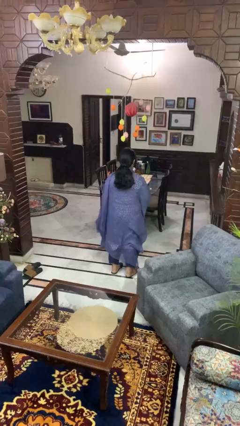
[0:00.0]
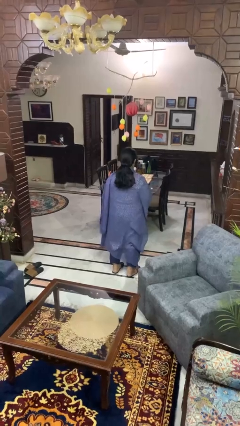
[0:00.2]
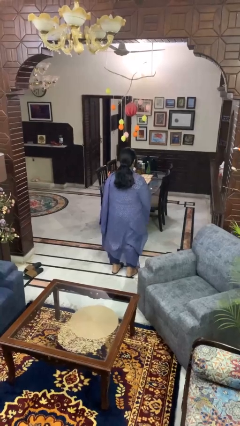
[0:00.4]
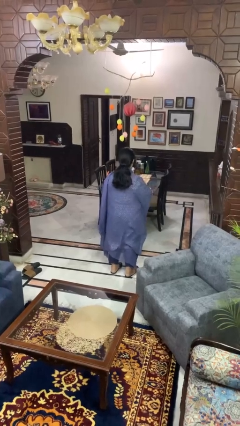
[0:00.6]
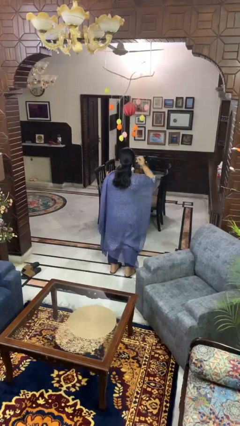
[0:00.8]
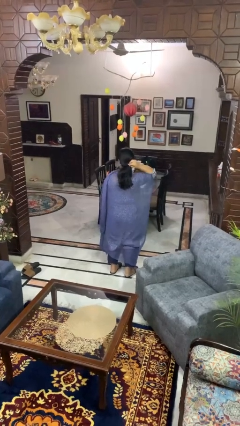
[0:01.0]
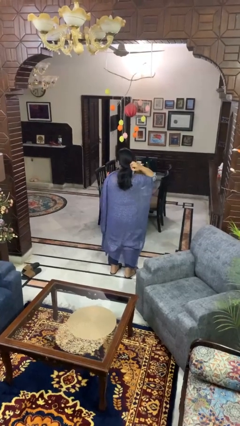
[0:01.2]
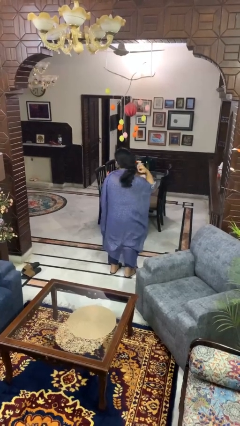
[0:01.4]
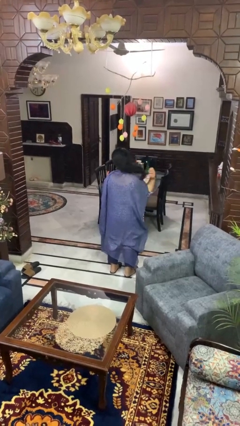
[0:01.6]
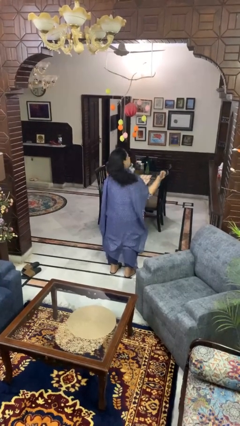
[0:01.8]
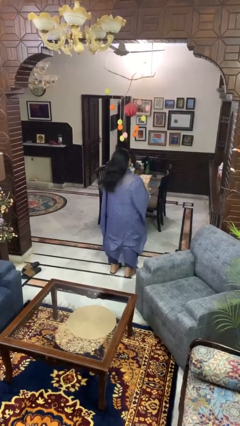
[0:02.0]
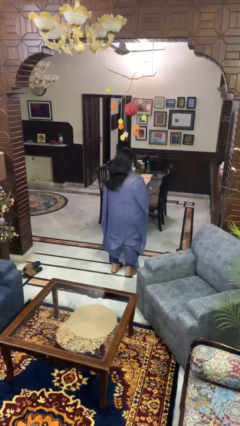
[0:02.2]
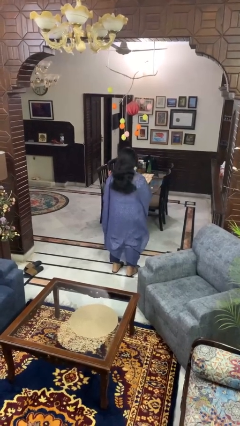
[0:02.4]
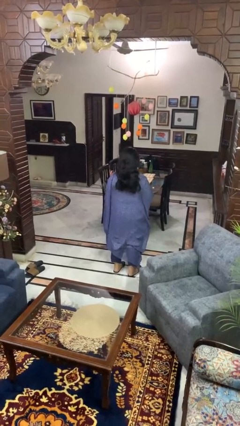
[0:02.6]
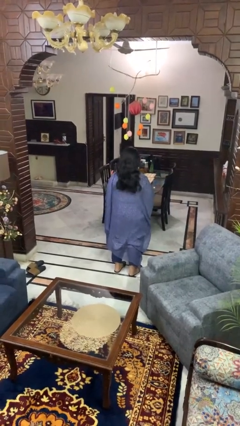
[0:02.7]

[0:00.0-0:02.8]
person takes off hairtie

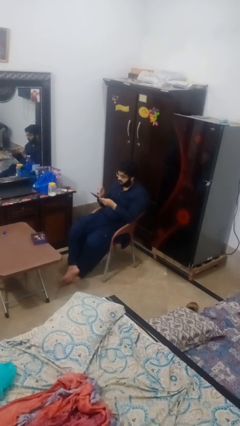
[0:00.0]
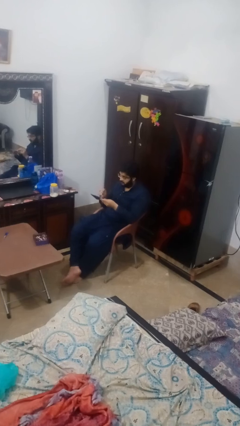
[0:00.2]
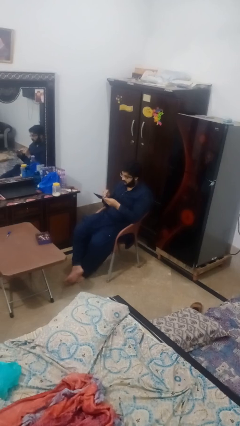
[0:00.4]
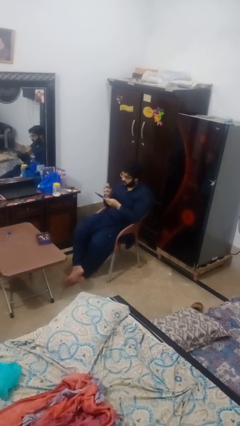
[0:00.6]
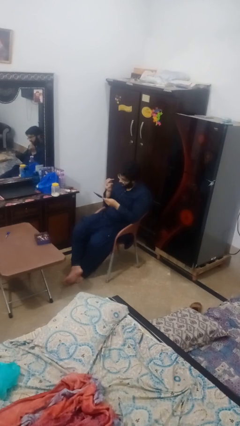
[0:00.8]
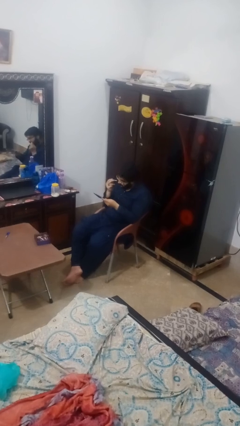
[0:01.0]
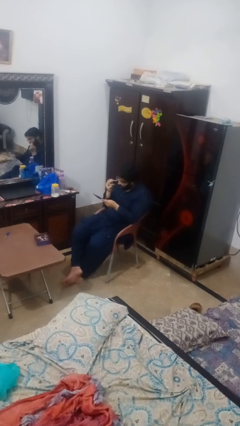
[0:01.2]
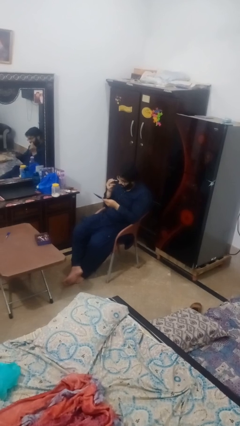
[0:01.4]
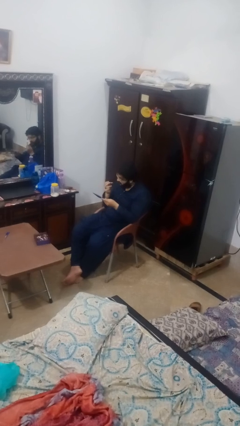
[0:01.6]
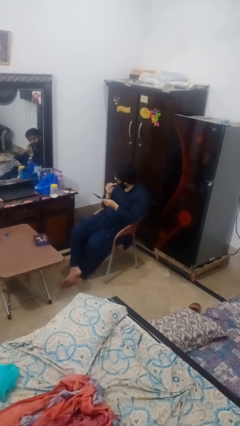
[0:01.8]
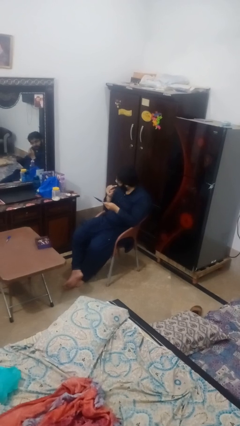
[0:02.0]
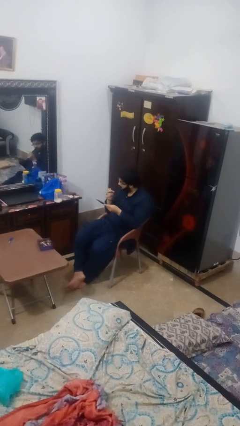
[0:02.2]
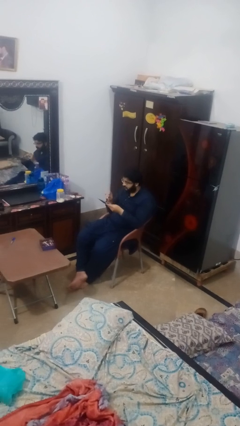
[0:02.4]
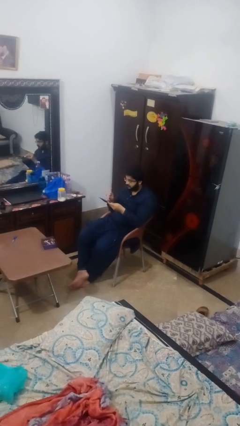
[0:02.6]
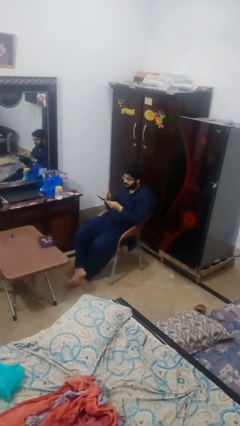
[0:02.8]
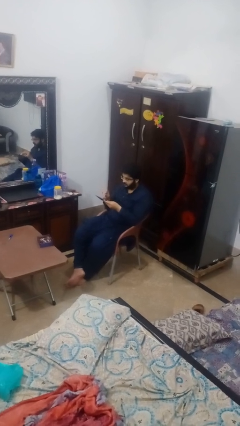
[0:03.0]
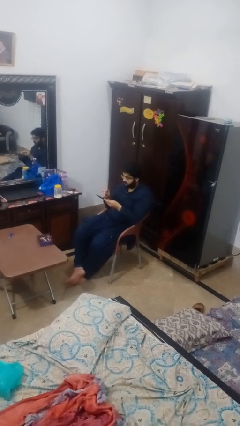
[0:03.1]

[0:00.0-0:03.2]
person applies foundation makeup

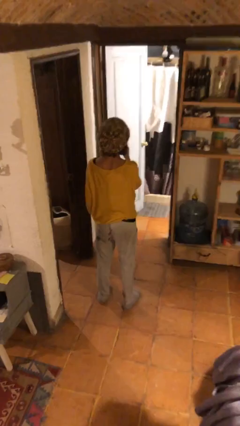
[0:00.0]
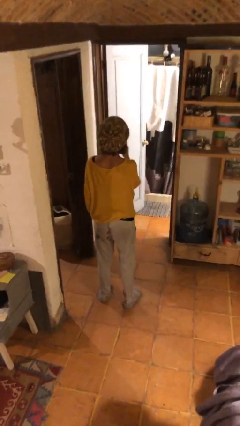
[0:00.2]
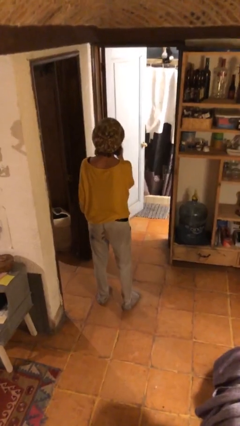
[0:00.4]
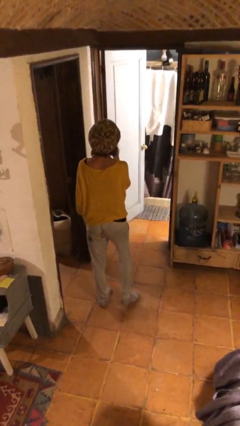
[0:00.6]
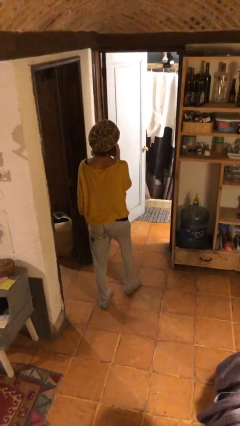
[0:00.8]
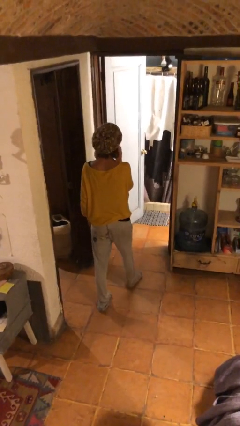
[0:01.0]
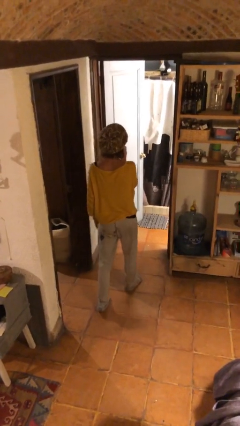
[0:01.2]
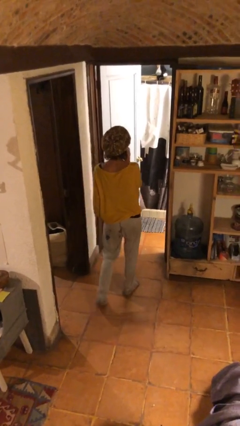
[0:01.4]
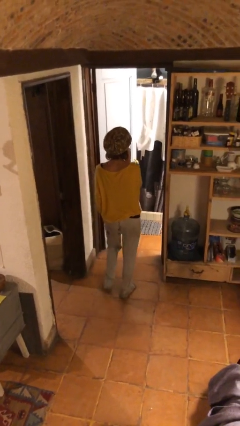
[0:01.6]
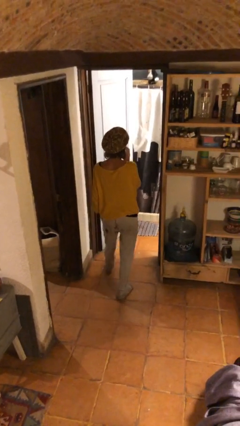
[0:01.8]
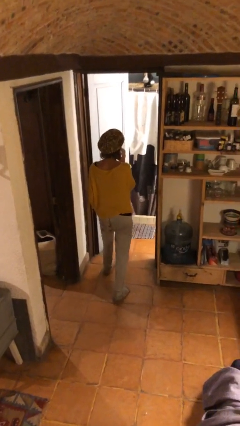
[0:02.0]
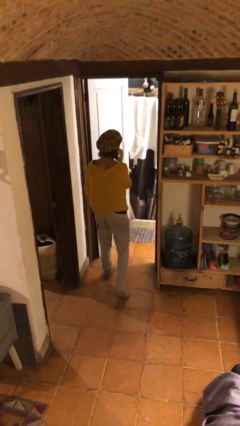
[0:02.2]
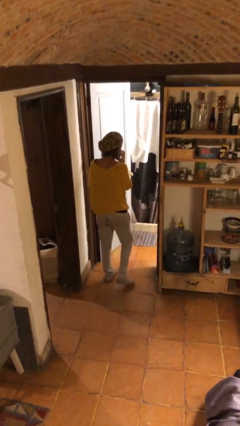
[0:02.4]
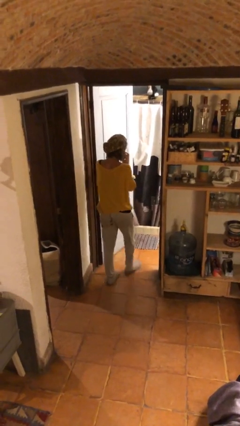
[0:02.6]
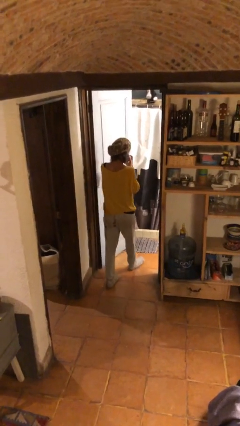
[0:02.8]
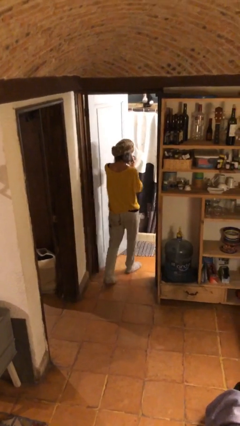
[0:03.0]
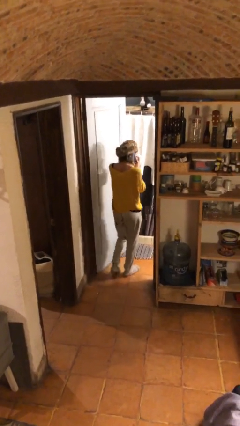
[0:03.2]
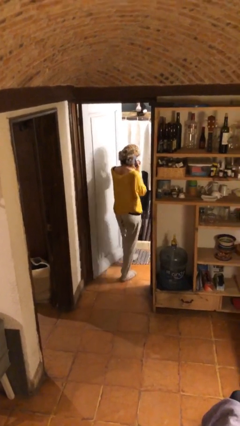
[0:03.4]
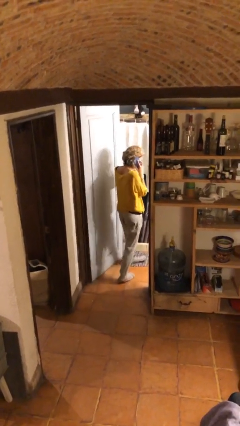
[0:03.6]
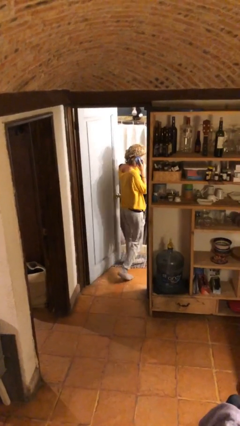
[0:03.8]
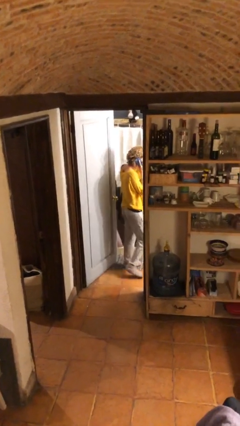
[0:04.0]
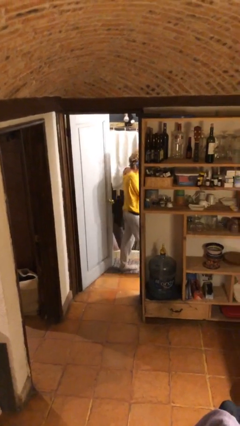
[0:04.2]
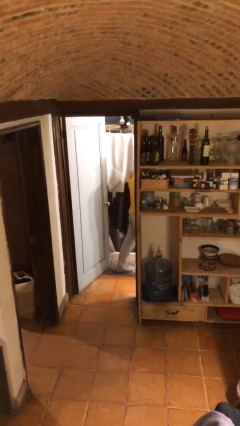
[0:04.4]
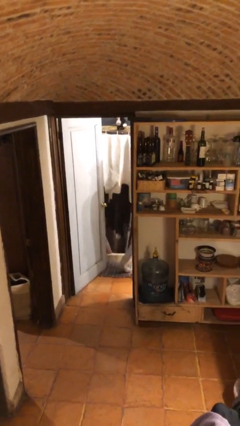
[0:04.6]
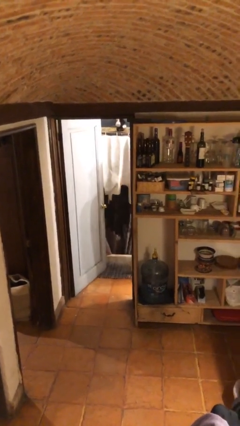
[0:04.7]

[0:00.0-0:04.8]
person exits scene through structure

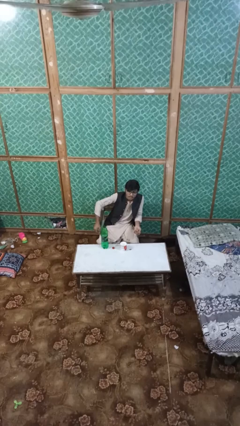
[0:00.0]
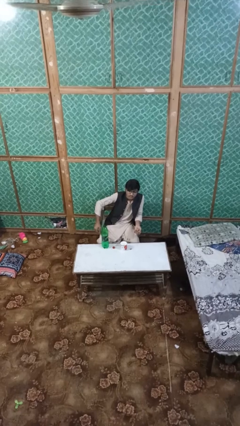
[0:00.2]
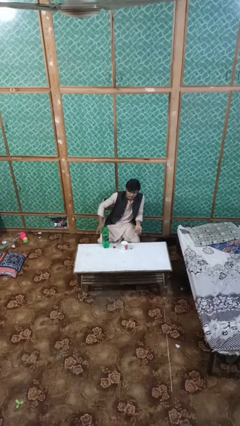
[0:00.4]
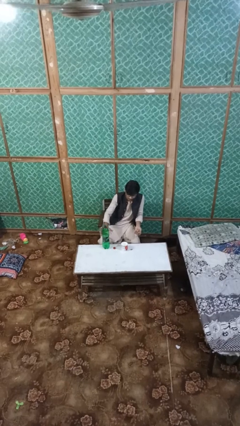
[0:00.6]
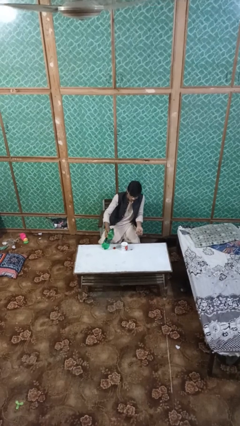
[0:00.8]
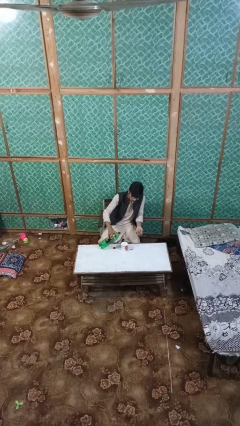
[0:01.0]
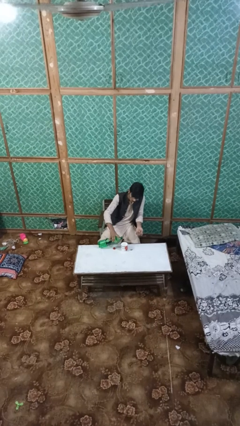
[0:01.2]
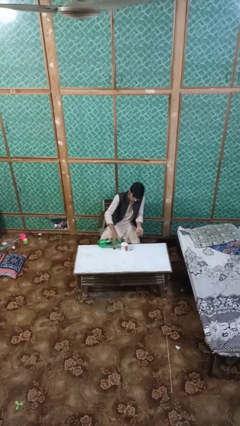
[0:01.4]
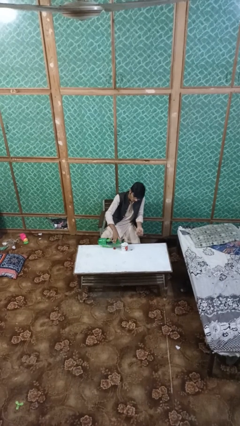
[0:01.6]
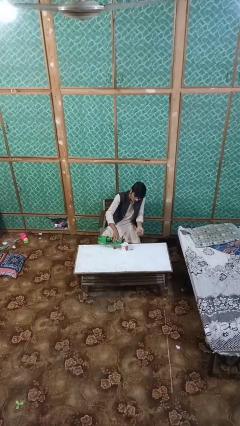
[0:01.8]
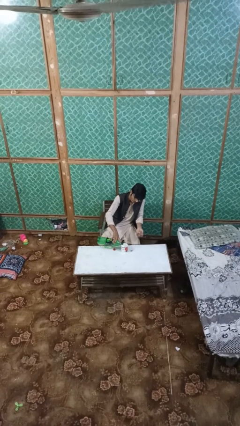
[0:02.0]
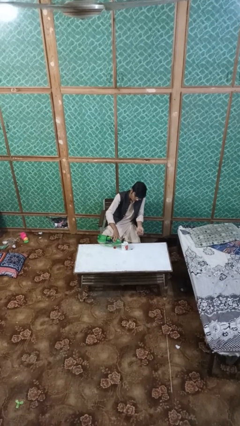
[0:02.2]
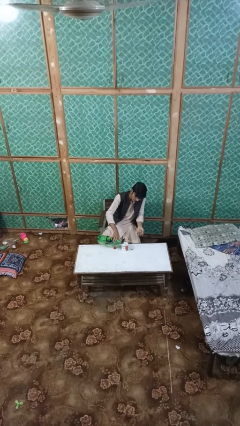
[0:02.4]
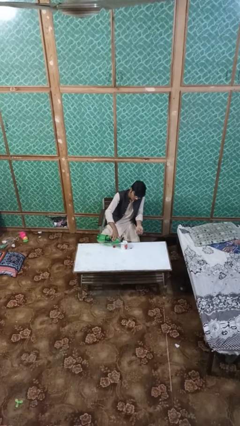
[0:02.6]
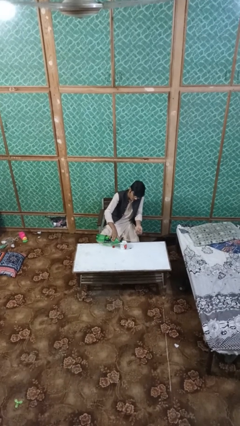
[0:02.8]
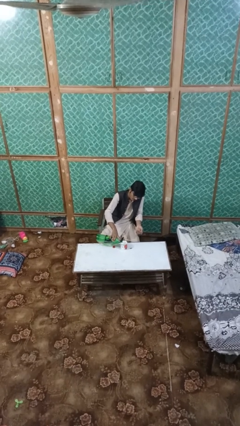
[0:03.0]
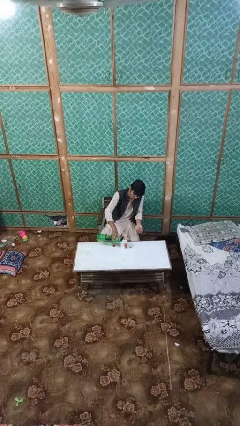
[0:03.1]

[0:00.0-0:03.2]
person pours liquid into cup

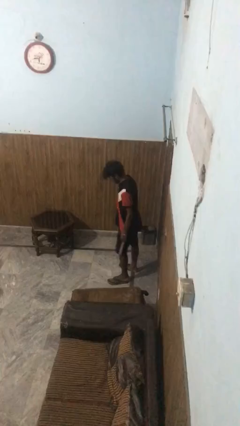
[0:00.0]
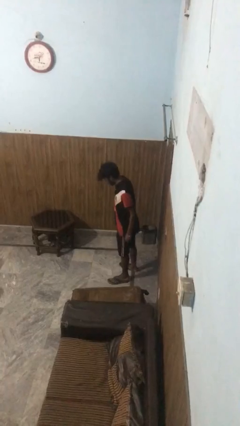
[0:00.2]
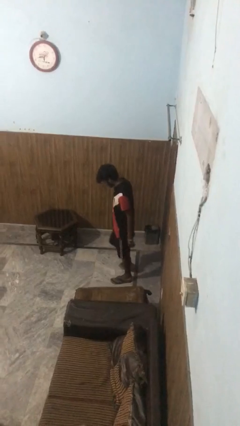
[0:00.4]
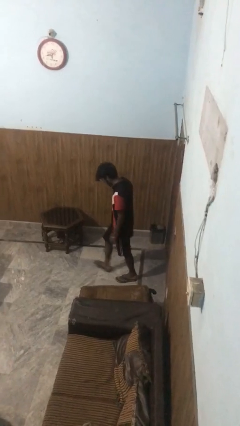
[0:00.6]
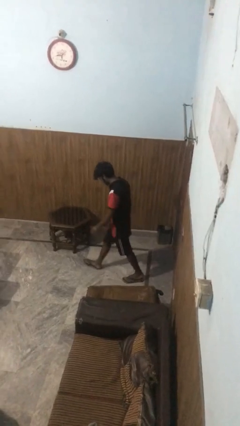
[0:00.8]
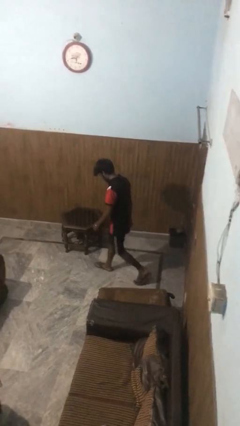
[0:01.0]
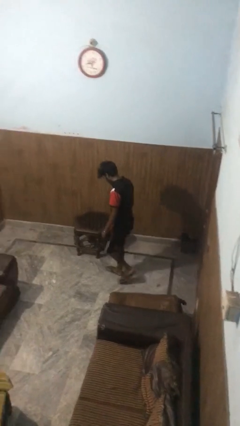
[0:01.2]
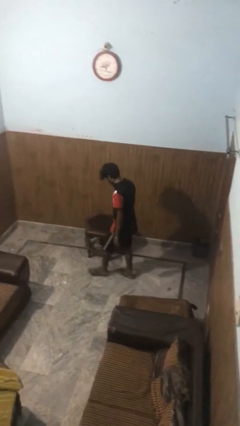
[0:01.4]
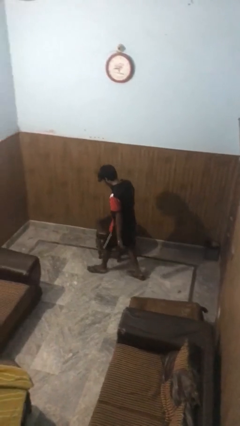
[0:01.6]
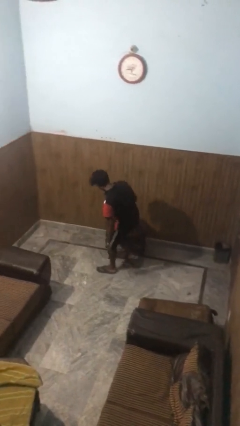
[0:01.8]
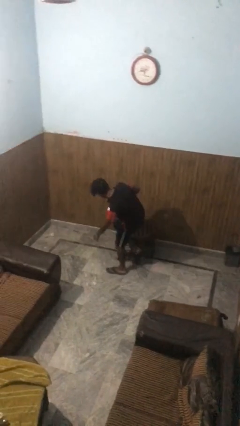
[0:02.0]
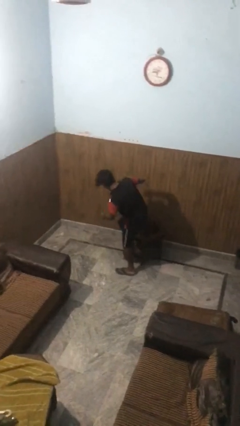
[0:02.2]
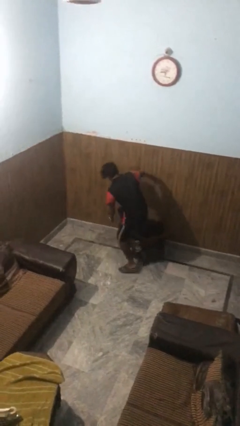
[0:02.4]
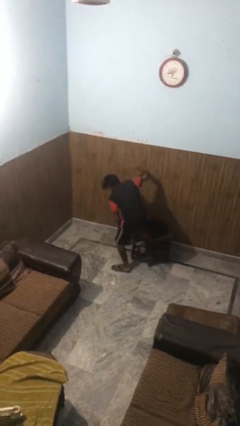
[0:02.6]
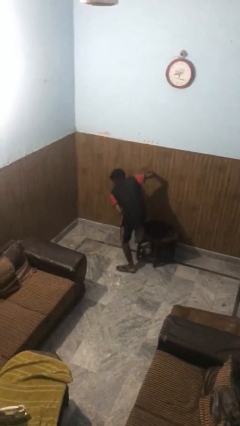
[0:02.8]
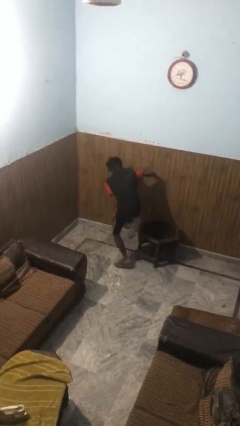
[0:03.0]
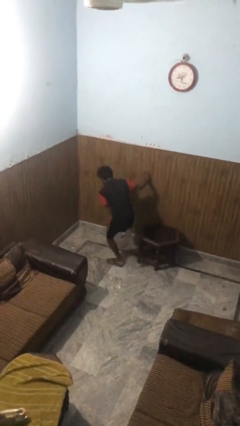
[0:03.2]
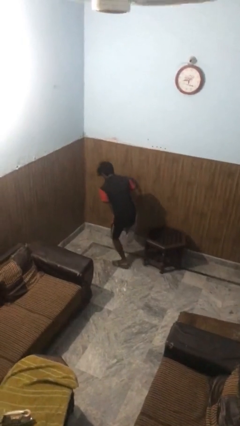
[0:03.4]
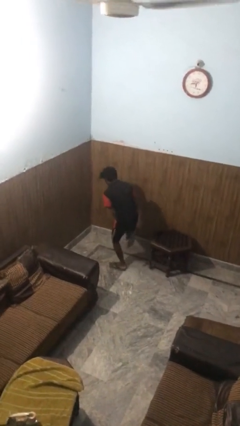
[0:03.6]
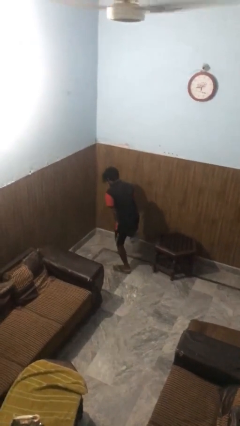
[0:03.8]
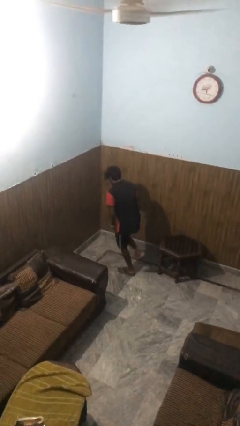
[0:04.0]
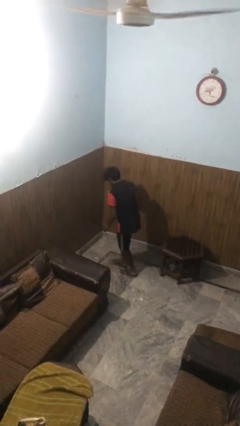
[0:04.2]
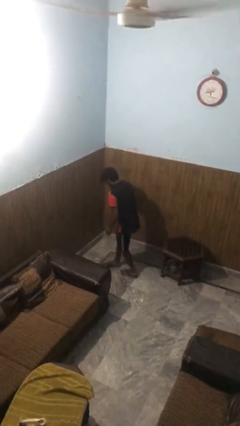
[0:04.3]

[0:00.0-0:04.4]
person bumps into table
